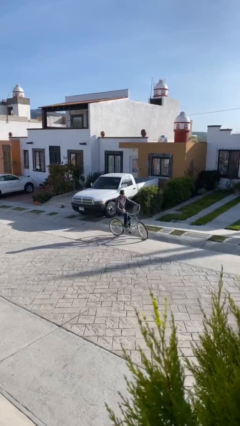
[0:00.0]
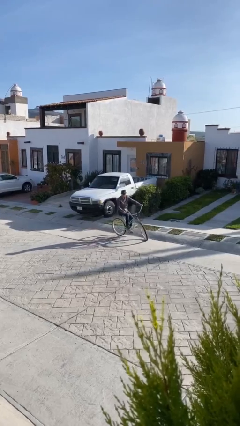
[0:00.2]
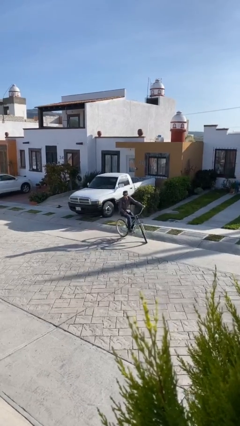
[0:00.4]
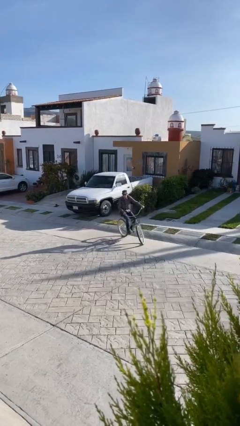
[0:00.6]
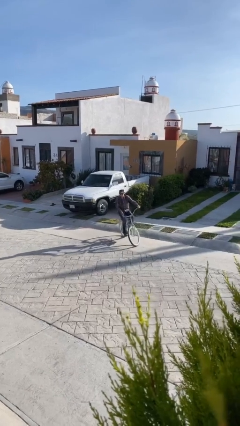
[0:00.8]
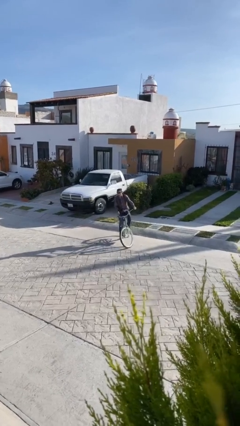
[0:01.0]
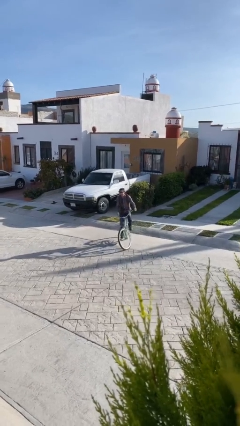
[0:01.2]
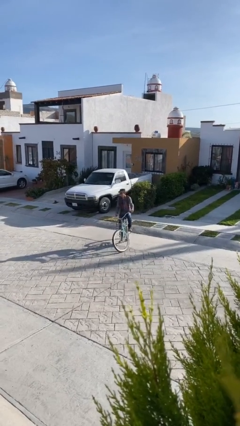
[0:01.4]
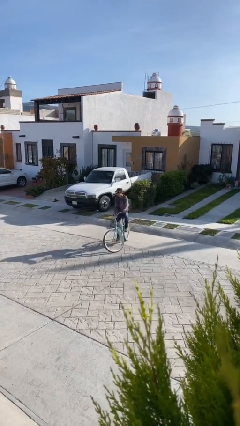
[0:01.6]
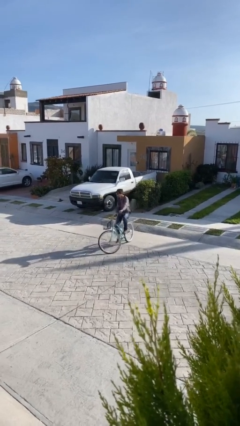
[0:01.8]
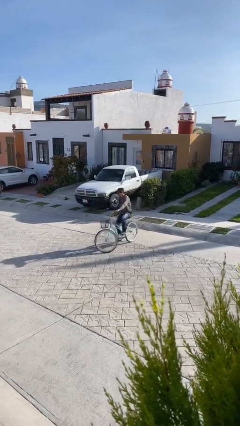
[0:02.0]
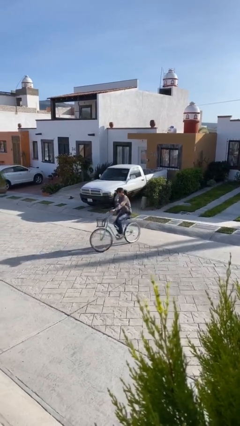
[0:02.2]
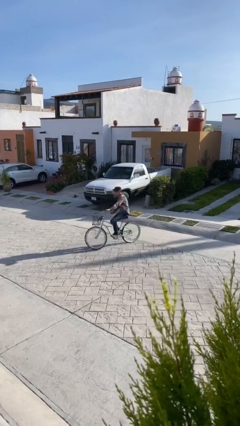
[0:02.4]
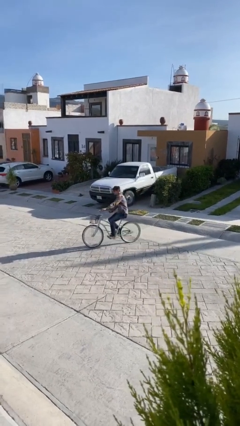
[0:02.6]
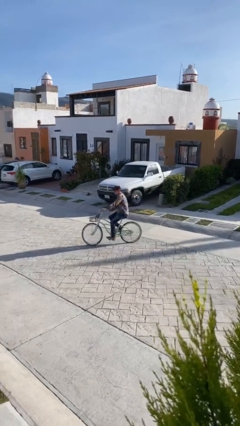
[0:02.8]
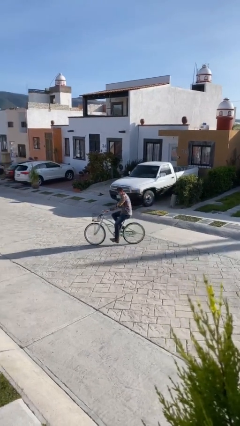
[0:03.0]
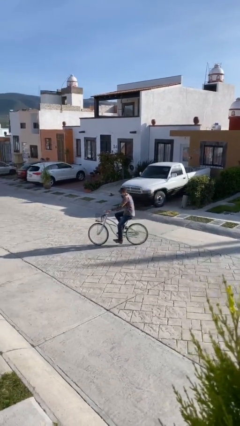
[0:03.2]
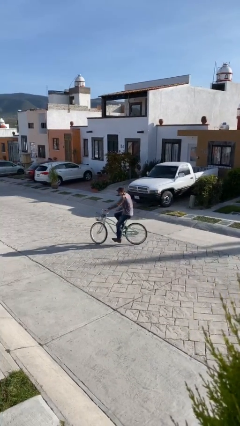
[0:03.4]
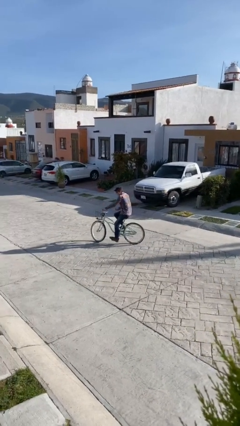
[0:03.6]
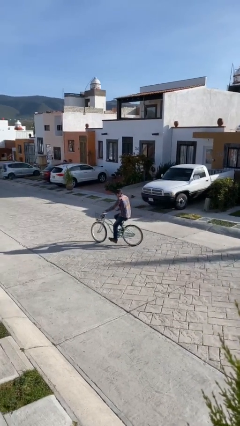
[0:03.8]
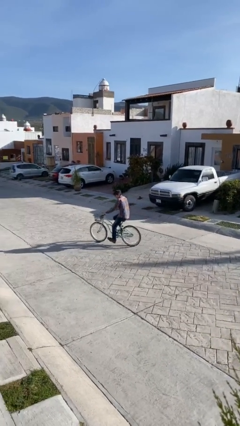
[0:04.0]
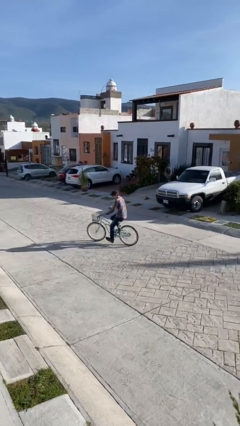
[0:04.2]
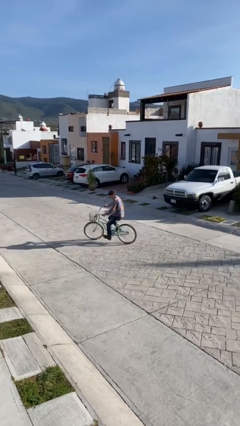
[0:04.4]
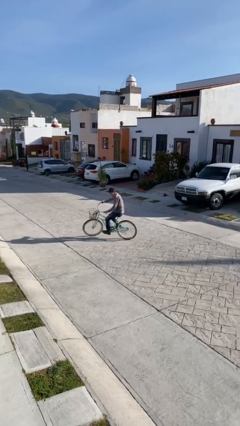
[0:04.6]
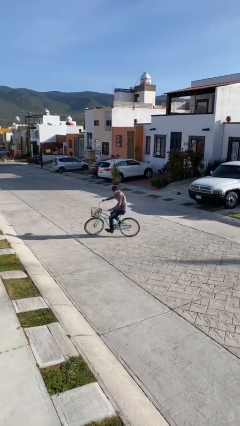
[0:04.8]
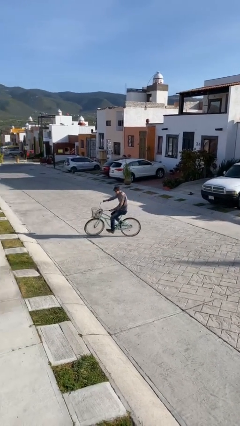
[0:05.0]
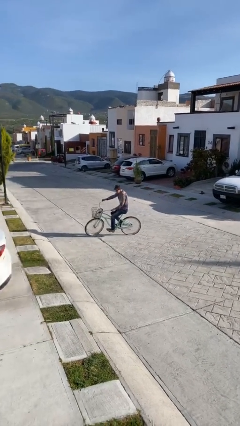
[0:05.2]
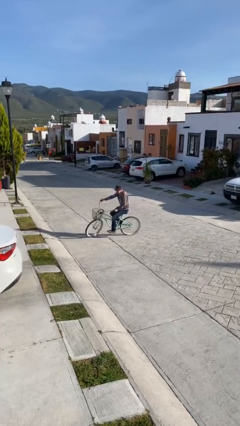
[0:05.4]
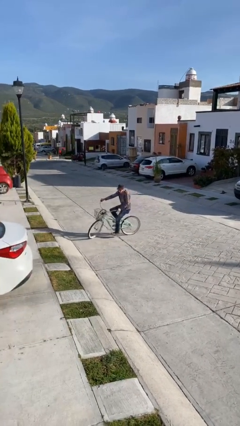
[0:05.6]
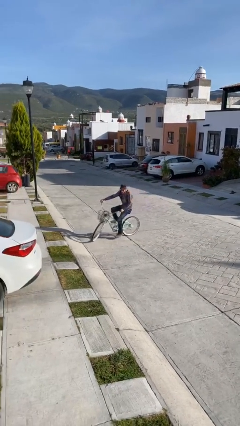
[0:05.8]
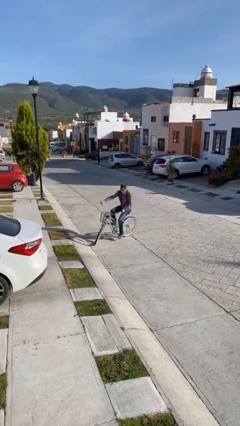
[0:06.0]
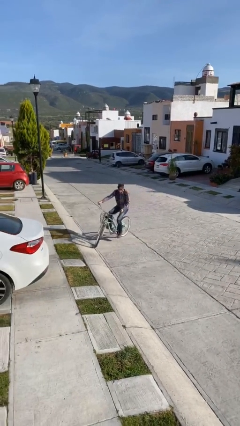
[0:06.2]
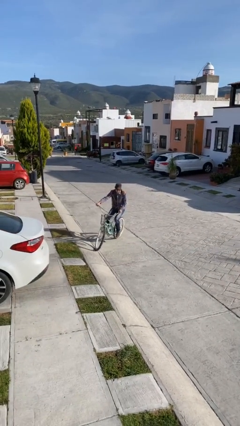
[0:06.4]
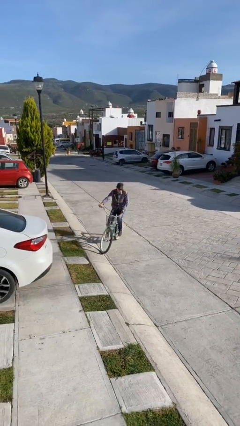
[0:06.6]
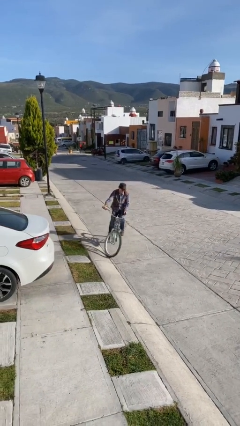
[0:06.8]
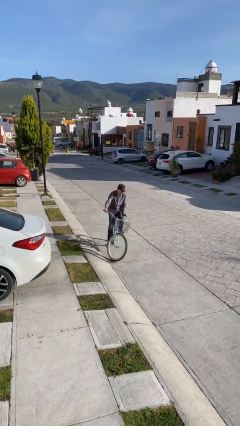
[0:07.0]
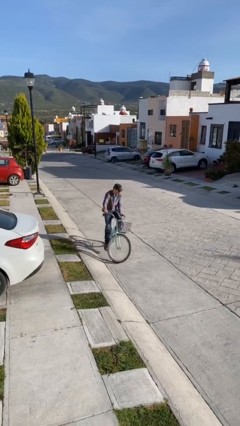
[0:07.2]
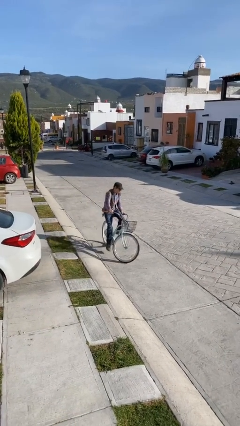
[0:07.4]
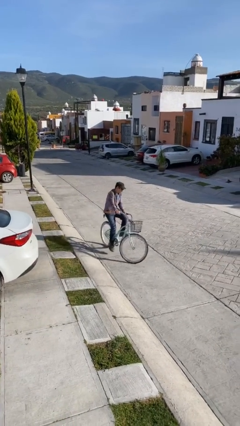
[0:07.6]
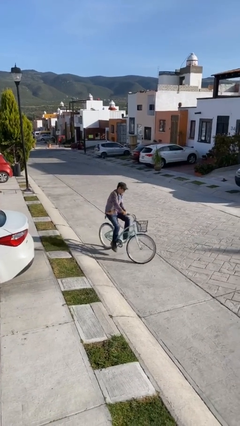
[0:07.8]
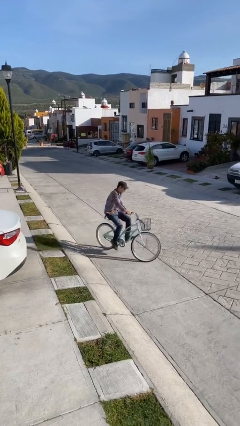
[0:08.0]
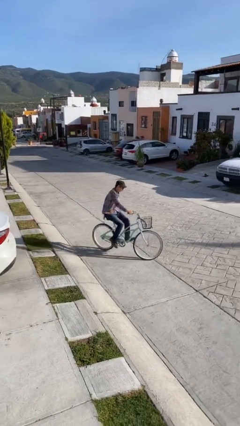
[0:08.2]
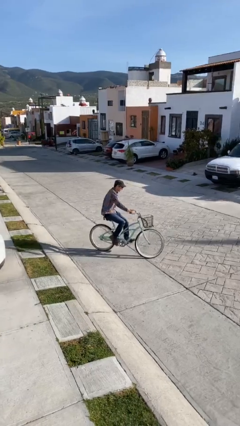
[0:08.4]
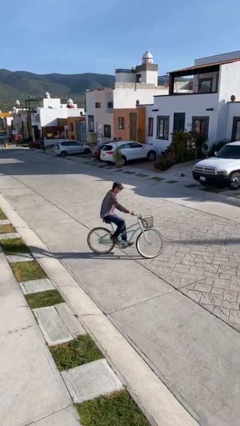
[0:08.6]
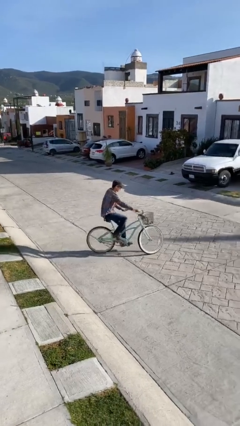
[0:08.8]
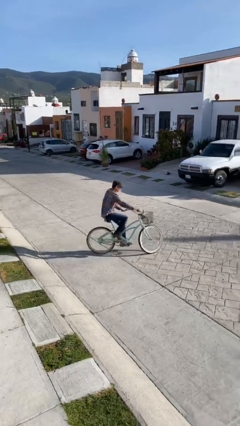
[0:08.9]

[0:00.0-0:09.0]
person rides bicycle

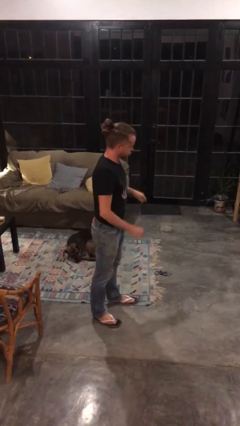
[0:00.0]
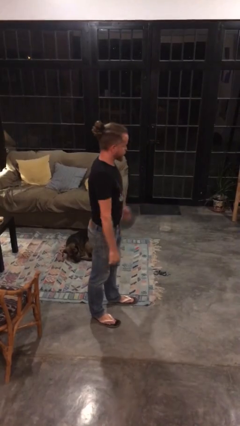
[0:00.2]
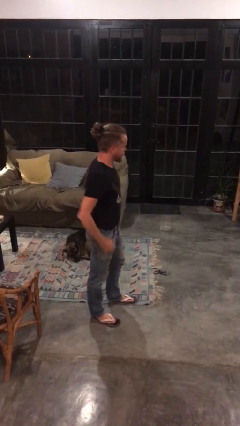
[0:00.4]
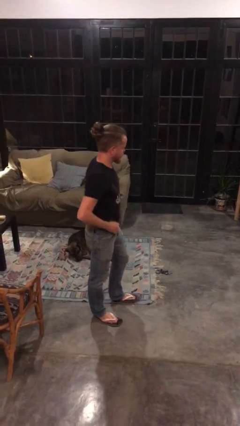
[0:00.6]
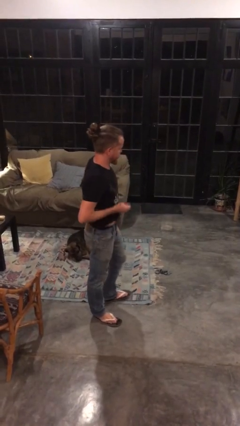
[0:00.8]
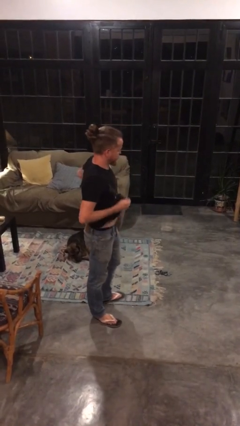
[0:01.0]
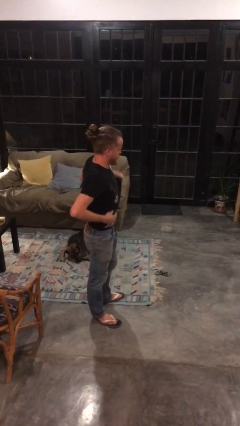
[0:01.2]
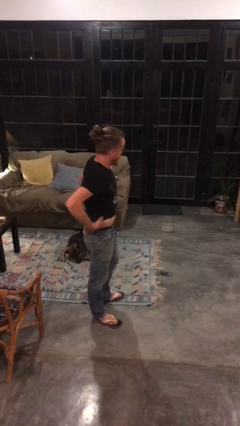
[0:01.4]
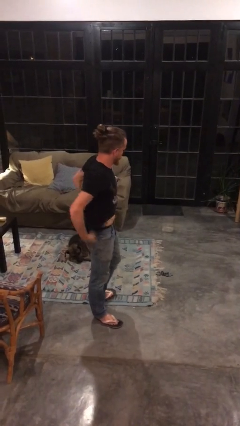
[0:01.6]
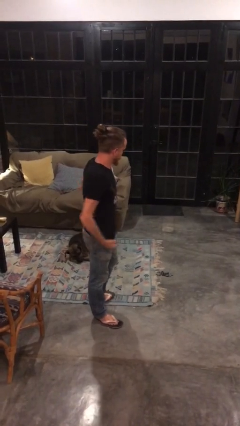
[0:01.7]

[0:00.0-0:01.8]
person untucks shirt

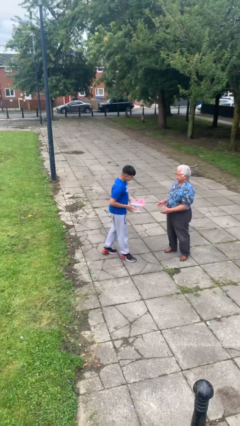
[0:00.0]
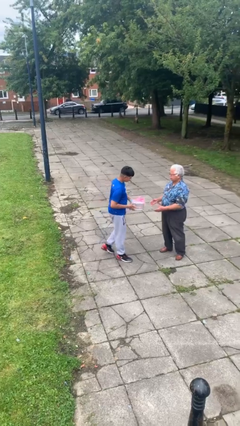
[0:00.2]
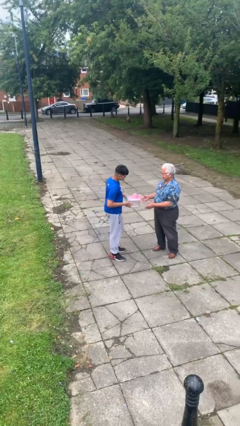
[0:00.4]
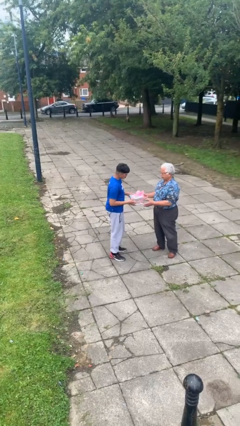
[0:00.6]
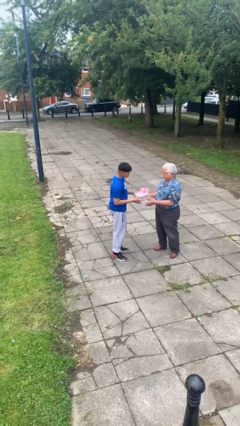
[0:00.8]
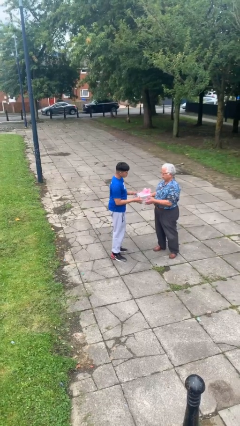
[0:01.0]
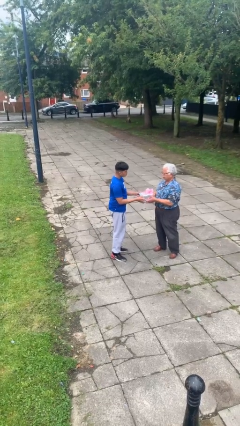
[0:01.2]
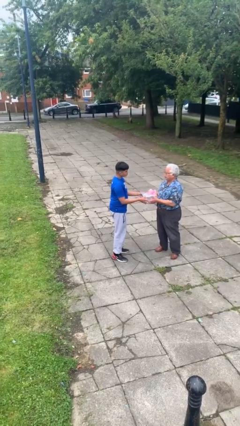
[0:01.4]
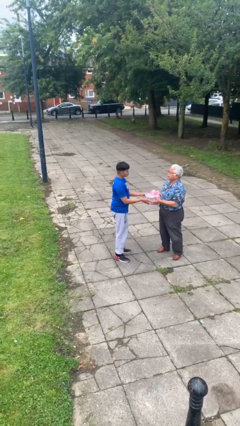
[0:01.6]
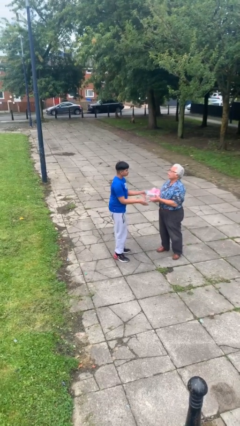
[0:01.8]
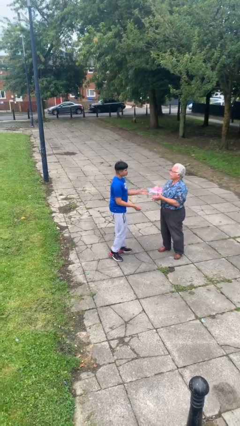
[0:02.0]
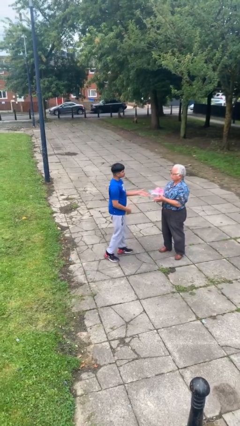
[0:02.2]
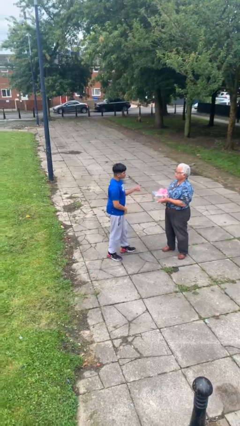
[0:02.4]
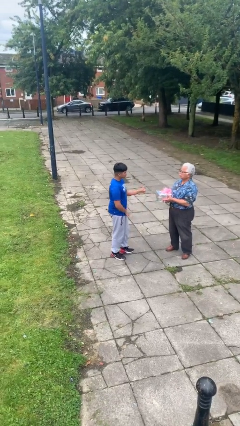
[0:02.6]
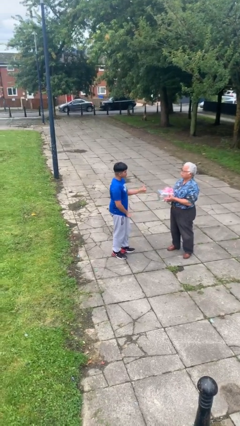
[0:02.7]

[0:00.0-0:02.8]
person transfers object to person

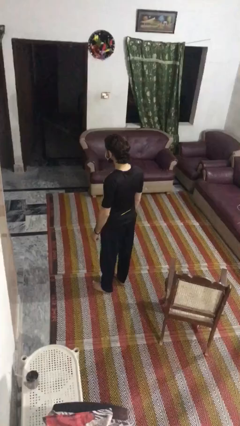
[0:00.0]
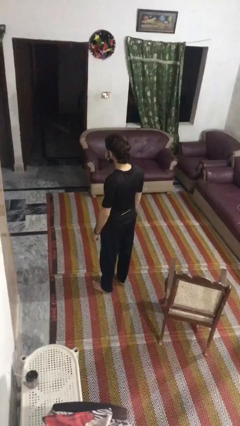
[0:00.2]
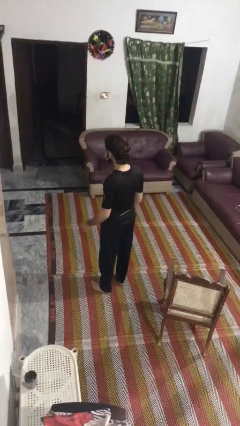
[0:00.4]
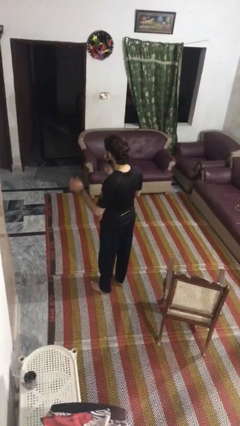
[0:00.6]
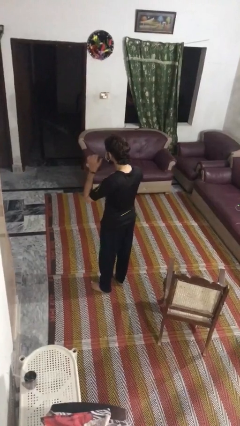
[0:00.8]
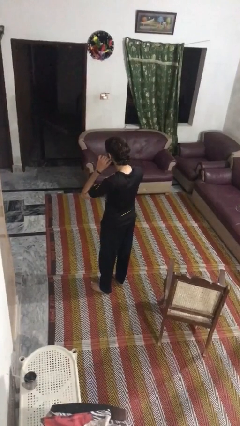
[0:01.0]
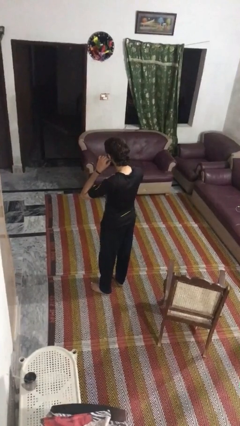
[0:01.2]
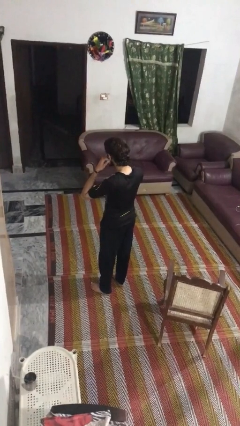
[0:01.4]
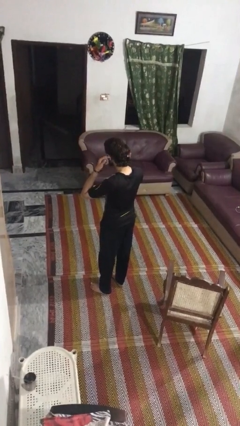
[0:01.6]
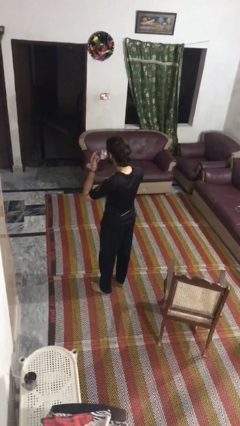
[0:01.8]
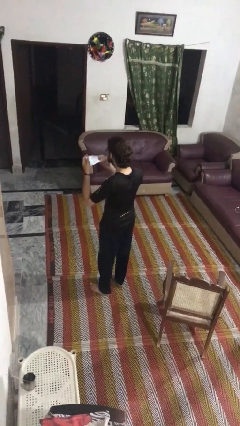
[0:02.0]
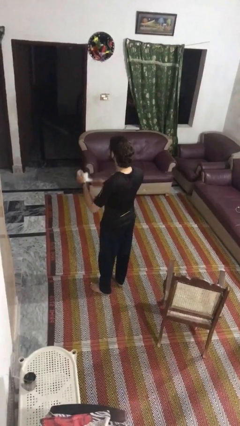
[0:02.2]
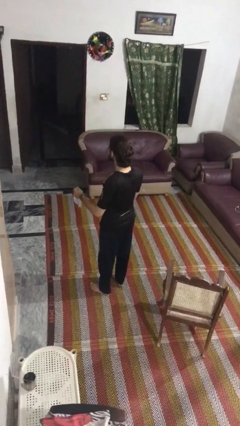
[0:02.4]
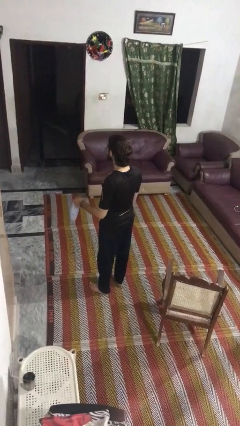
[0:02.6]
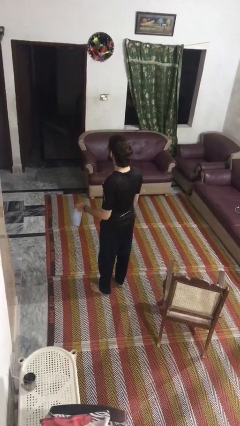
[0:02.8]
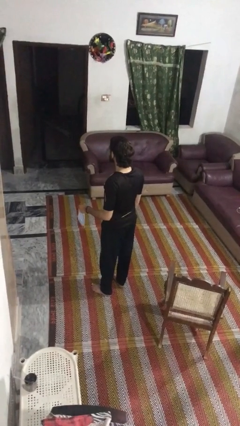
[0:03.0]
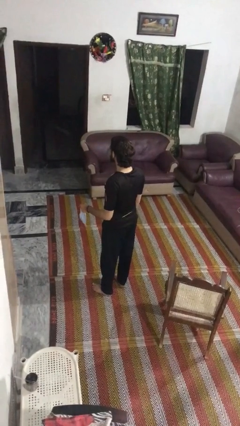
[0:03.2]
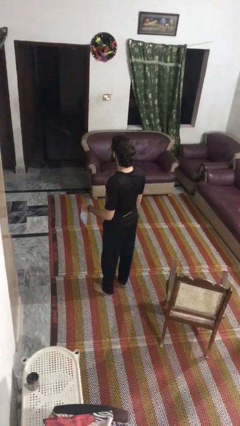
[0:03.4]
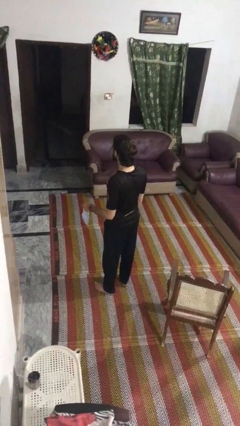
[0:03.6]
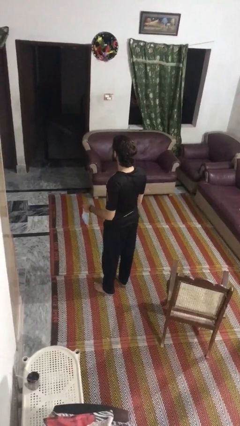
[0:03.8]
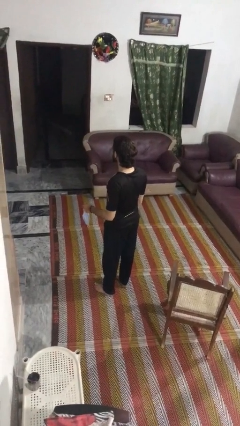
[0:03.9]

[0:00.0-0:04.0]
person takes off facemask
